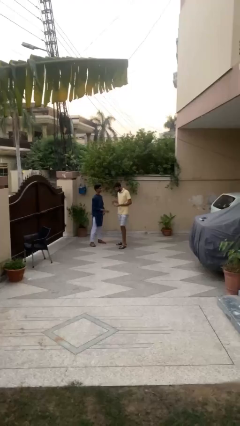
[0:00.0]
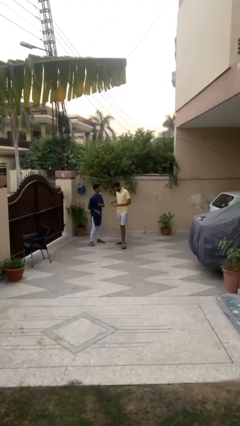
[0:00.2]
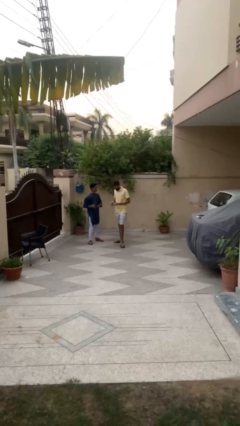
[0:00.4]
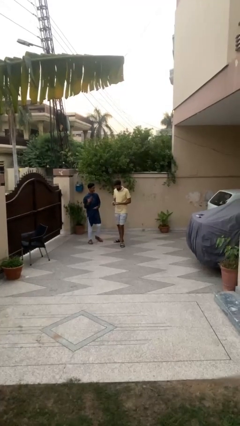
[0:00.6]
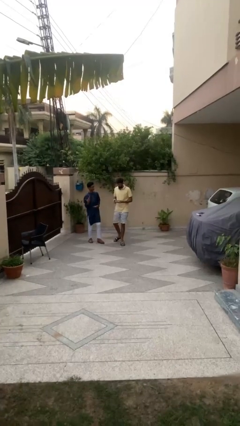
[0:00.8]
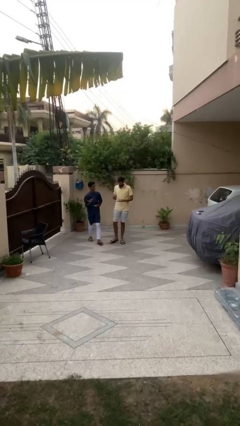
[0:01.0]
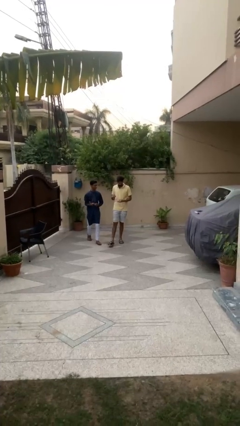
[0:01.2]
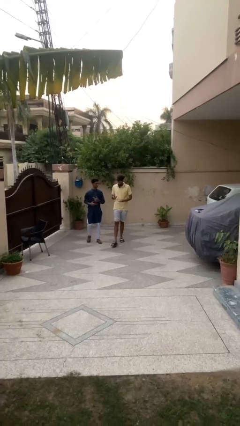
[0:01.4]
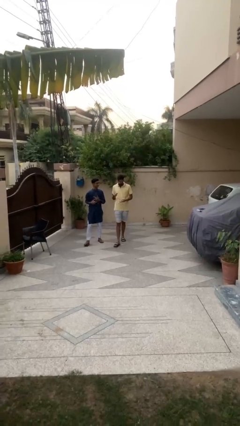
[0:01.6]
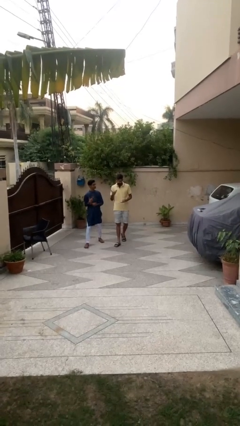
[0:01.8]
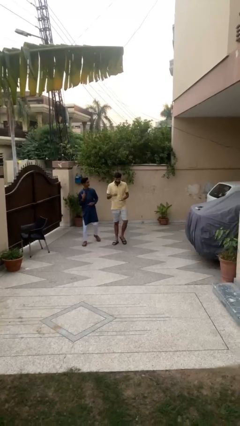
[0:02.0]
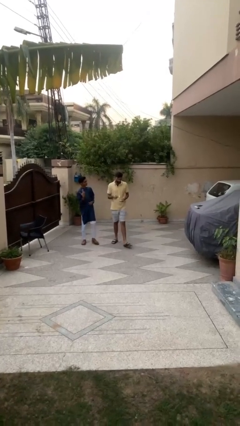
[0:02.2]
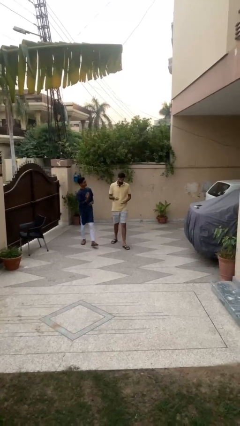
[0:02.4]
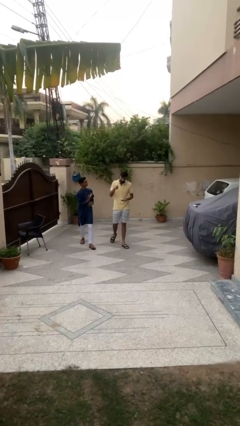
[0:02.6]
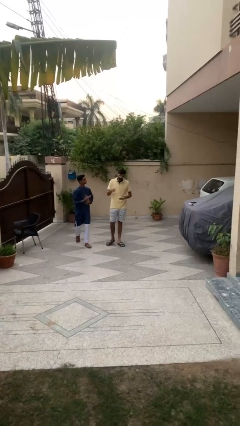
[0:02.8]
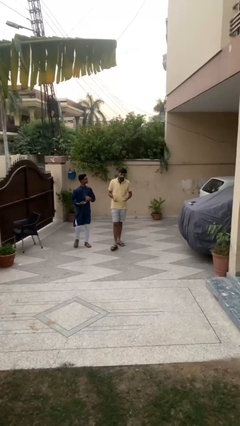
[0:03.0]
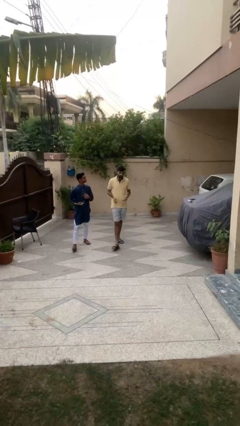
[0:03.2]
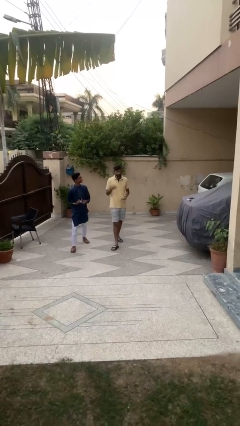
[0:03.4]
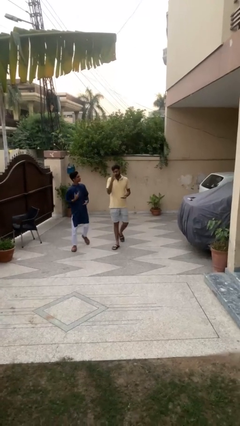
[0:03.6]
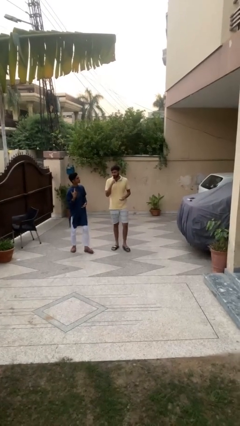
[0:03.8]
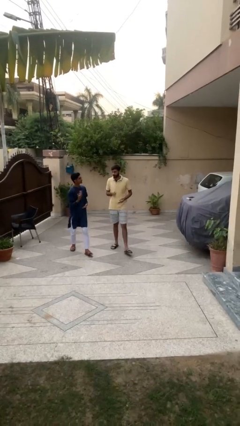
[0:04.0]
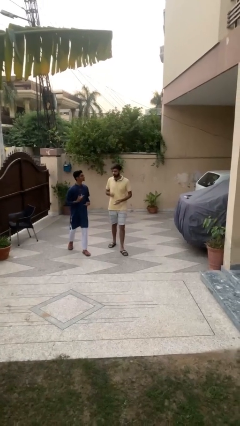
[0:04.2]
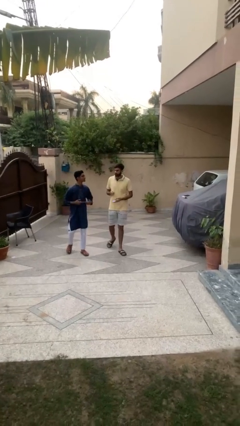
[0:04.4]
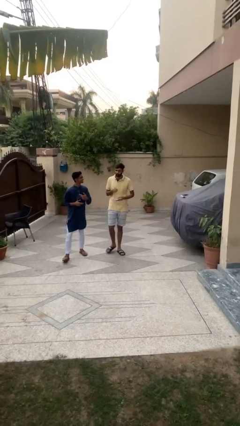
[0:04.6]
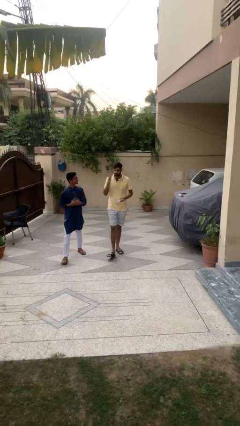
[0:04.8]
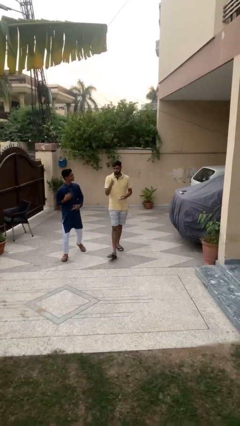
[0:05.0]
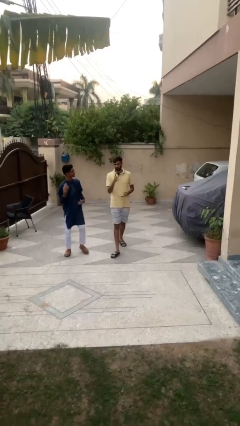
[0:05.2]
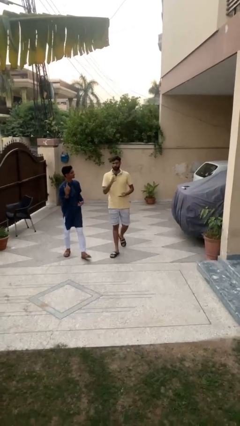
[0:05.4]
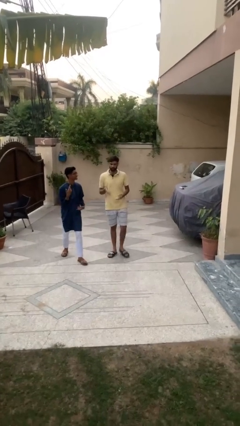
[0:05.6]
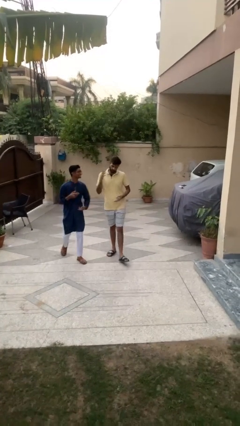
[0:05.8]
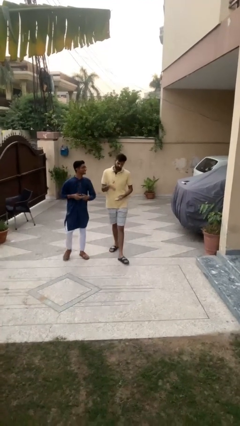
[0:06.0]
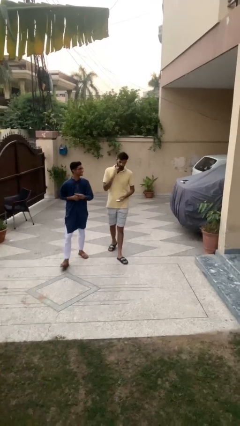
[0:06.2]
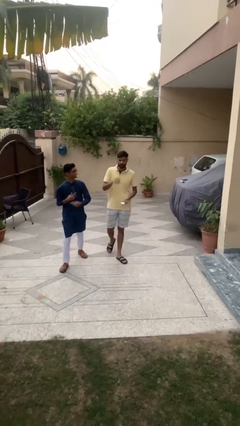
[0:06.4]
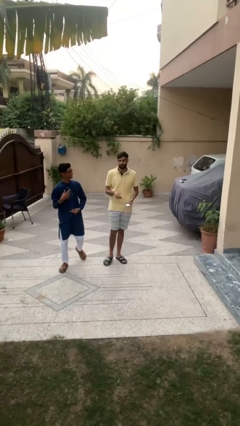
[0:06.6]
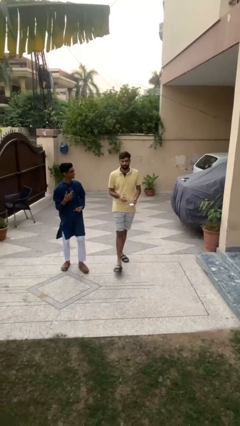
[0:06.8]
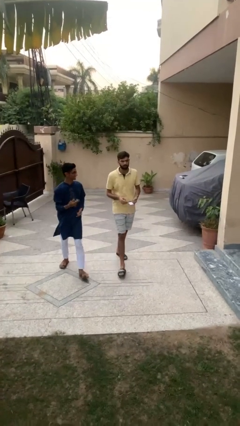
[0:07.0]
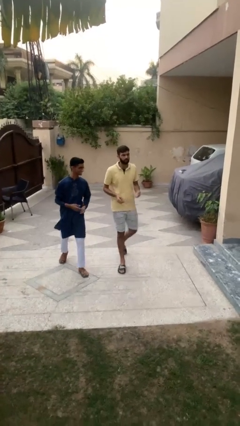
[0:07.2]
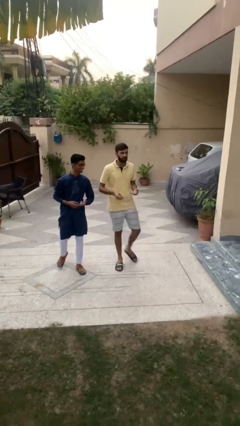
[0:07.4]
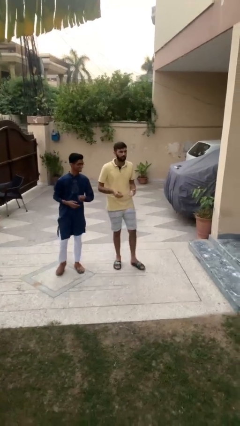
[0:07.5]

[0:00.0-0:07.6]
person talks to person

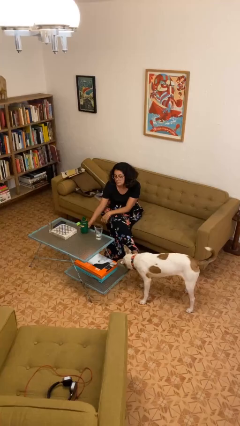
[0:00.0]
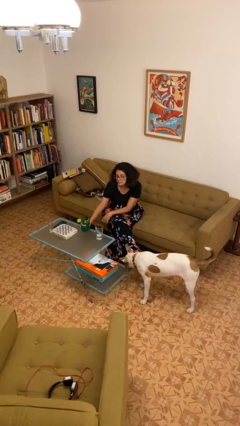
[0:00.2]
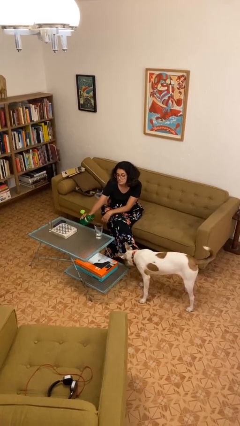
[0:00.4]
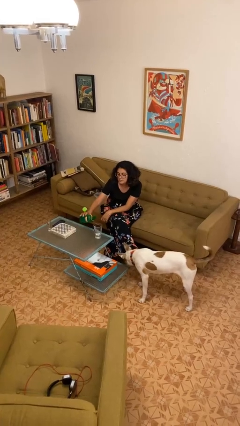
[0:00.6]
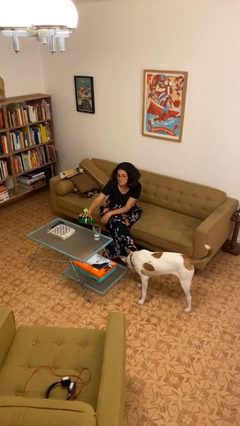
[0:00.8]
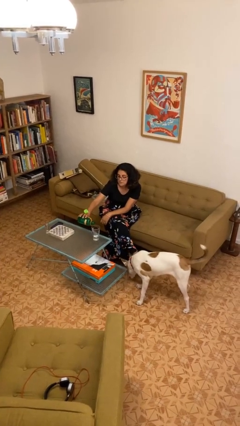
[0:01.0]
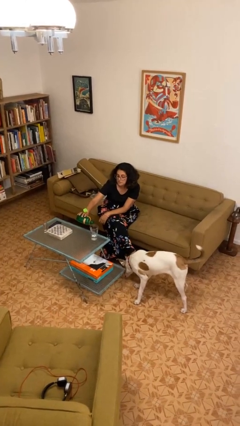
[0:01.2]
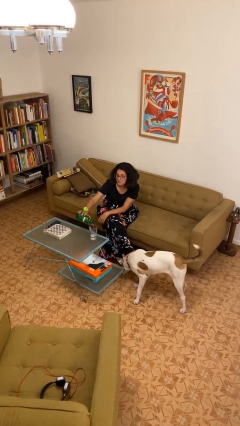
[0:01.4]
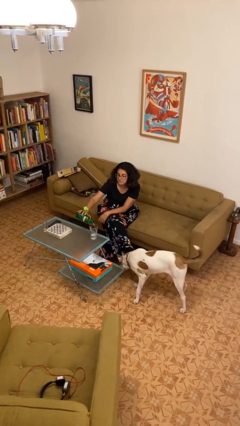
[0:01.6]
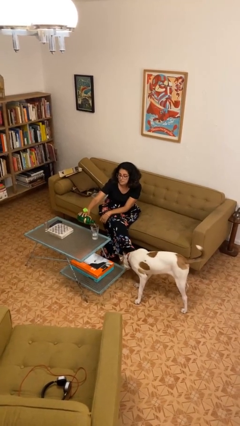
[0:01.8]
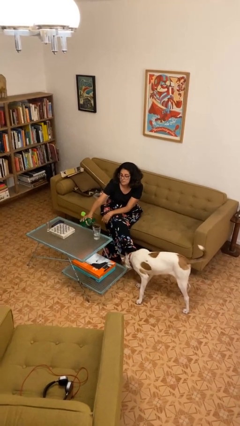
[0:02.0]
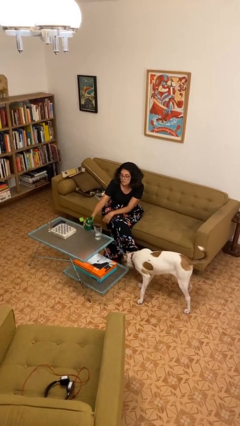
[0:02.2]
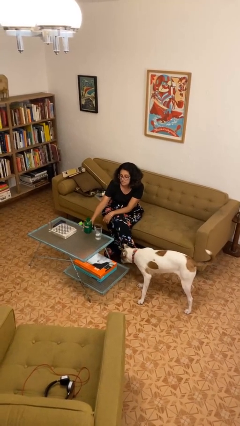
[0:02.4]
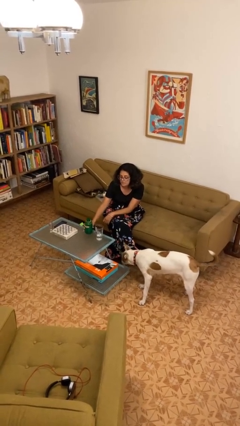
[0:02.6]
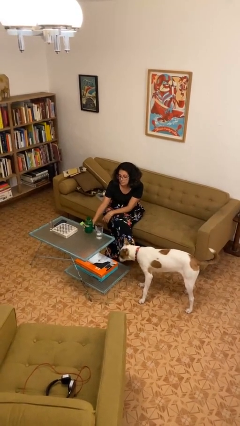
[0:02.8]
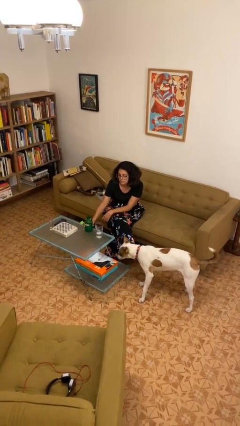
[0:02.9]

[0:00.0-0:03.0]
person pours liquid into cup

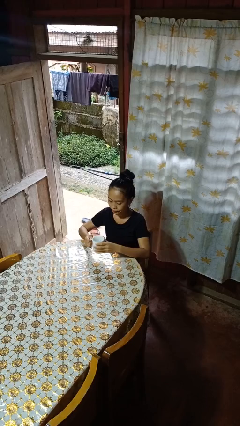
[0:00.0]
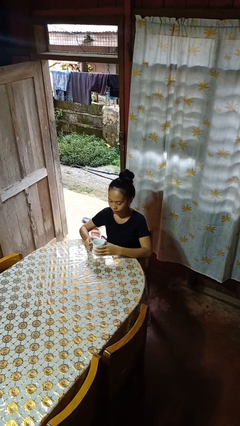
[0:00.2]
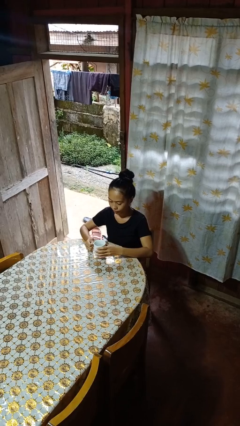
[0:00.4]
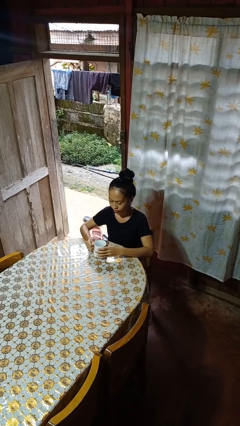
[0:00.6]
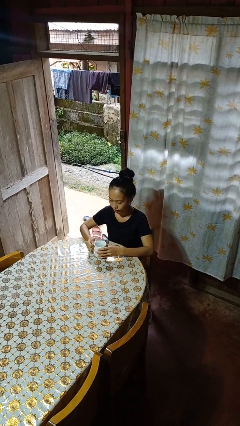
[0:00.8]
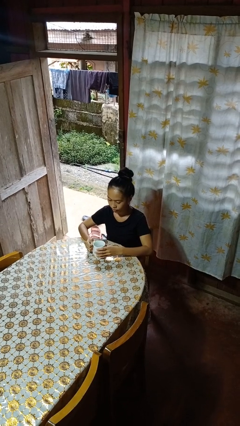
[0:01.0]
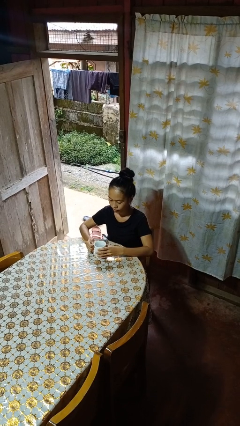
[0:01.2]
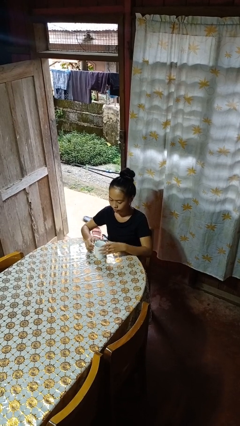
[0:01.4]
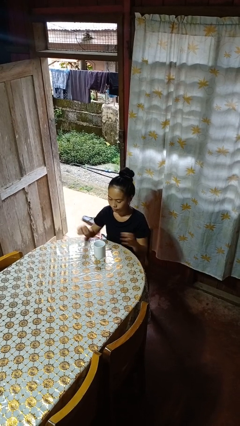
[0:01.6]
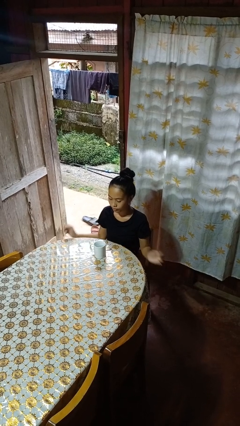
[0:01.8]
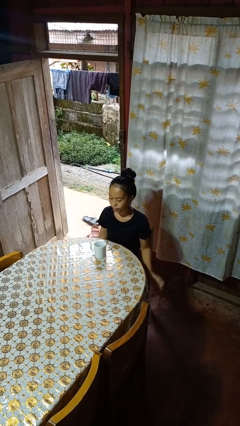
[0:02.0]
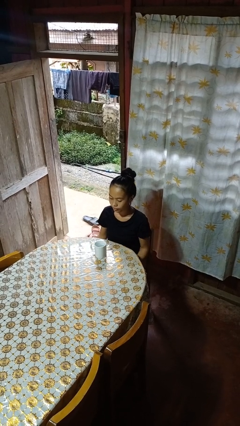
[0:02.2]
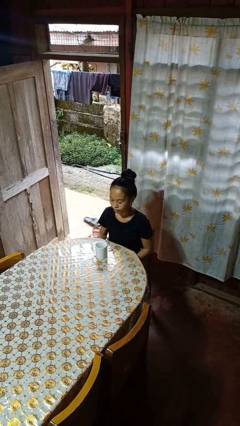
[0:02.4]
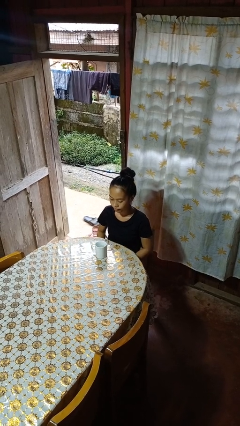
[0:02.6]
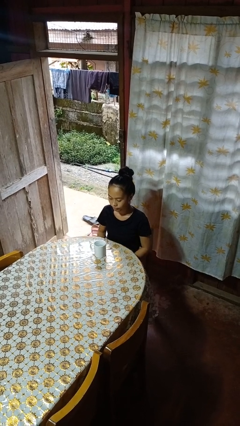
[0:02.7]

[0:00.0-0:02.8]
person puts down object on table

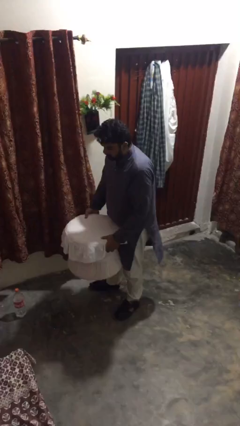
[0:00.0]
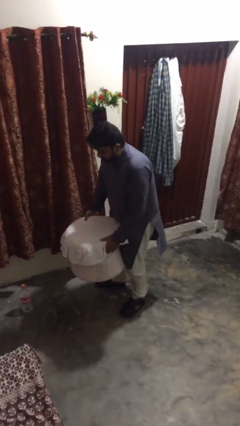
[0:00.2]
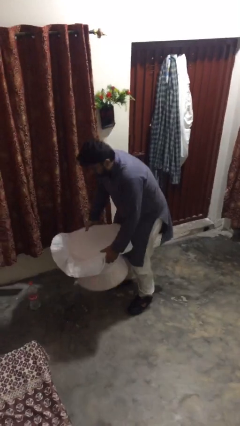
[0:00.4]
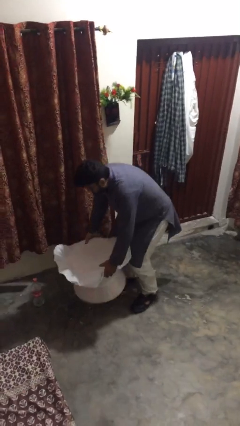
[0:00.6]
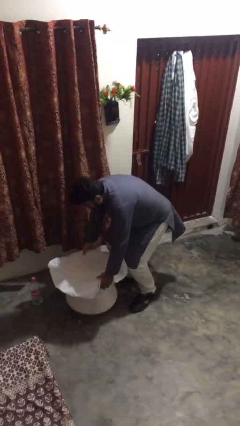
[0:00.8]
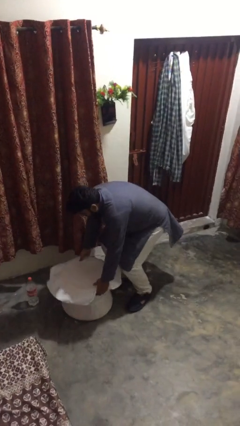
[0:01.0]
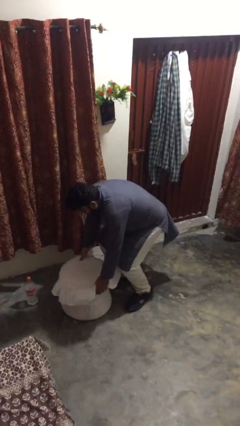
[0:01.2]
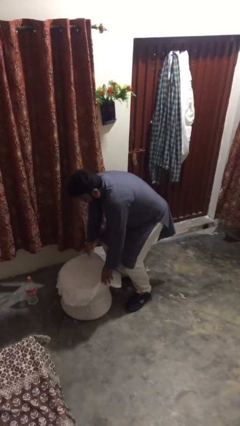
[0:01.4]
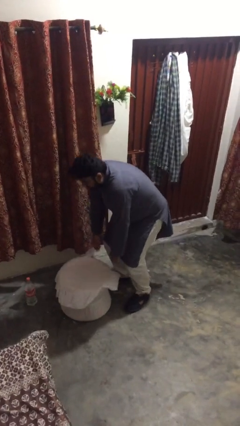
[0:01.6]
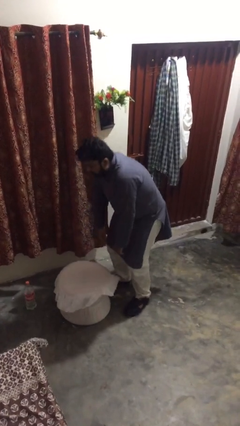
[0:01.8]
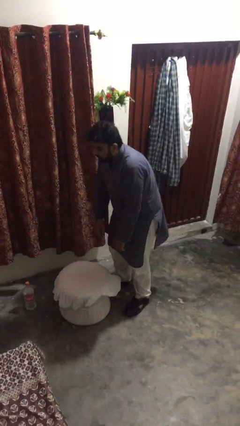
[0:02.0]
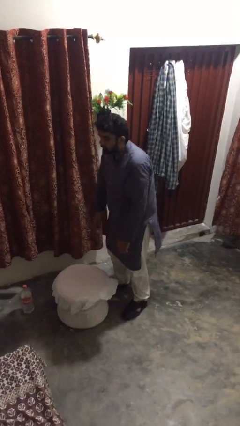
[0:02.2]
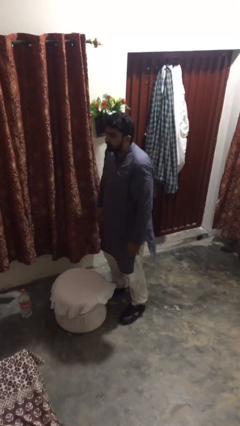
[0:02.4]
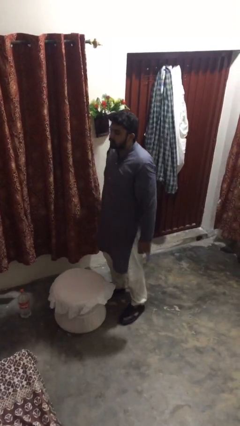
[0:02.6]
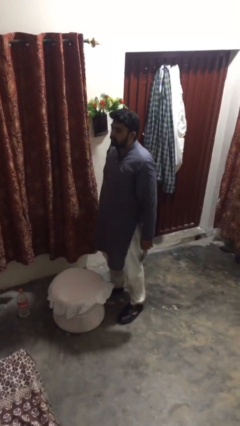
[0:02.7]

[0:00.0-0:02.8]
person puts down object on floor

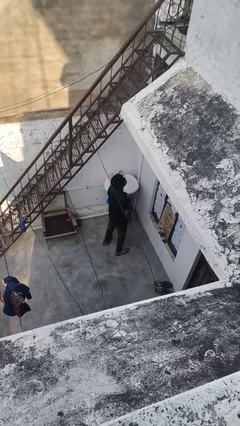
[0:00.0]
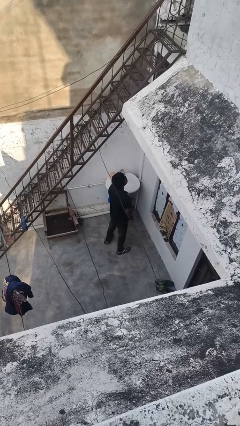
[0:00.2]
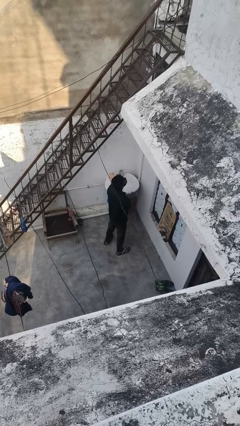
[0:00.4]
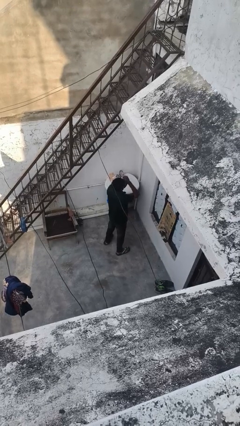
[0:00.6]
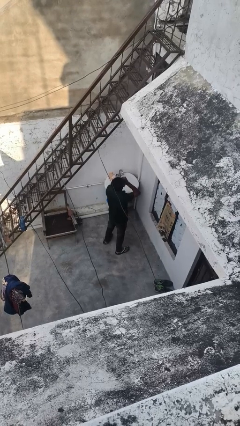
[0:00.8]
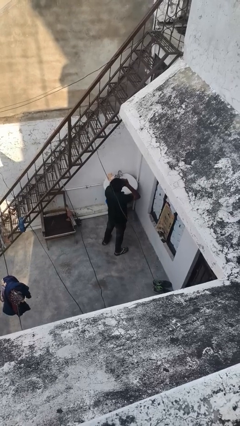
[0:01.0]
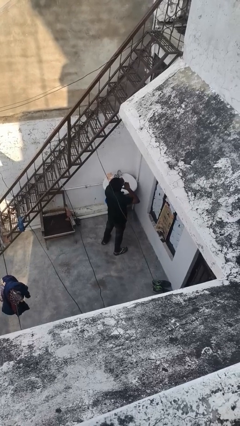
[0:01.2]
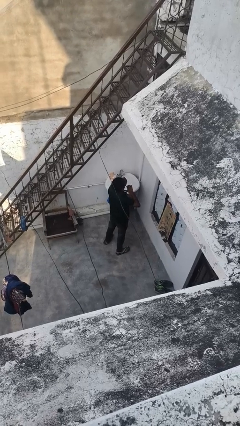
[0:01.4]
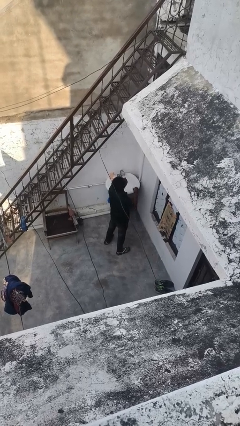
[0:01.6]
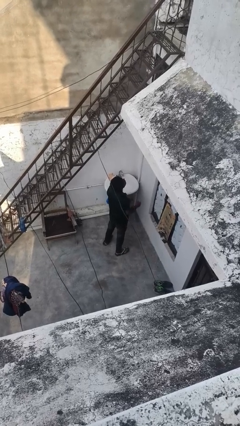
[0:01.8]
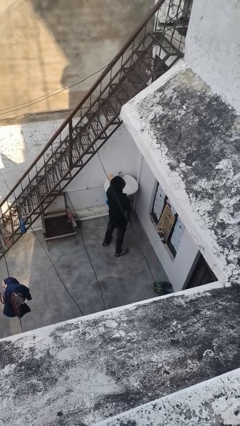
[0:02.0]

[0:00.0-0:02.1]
person gestures cut
